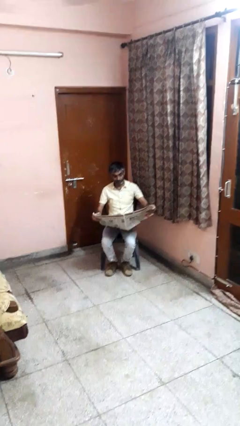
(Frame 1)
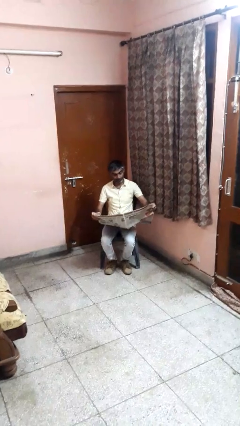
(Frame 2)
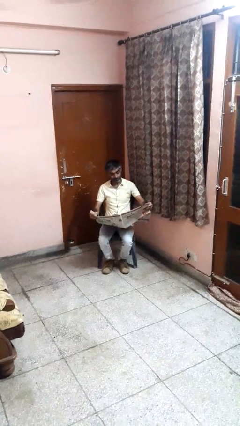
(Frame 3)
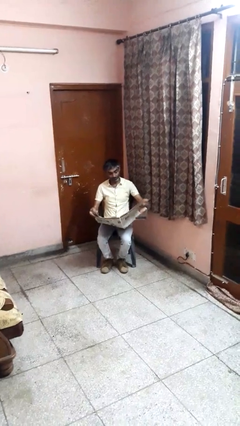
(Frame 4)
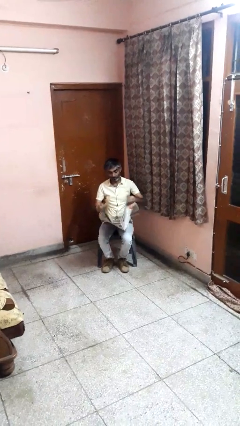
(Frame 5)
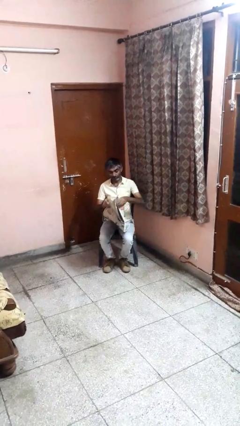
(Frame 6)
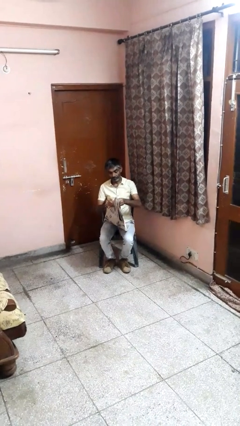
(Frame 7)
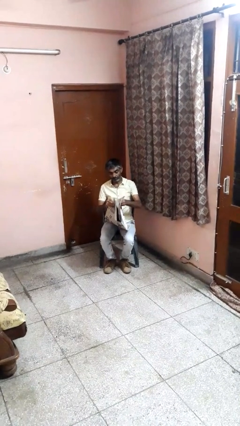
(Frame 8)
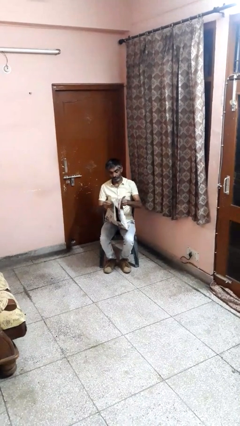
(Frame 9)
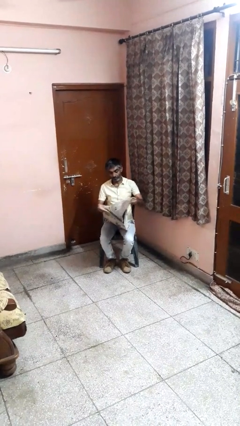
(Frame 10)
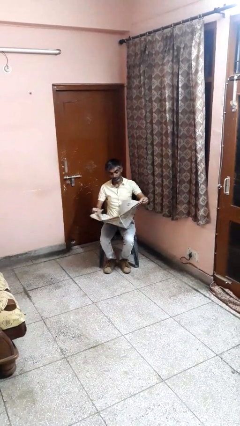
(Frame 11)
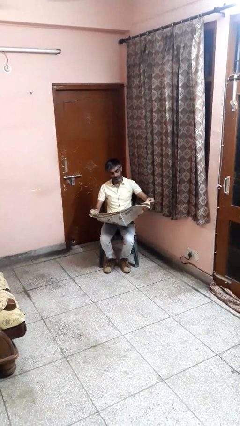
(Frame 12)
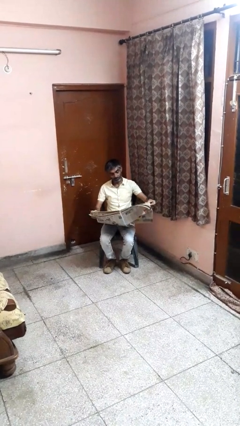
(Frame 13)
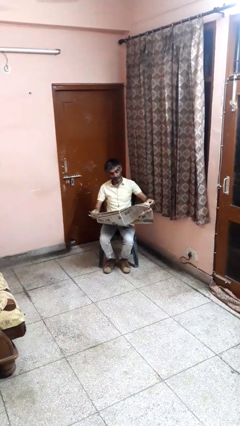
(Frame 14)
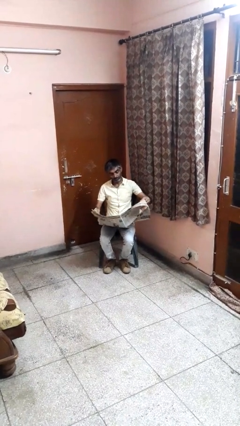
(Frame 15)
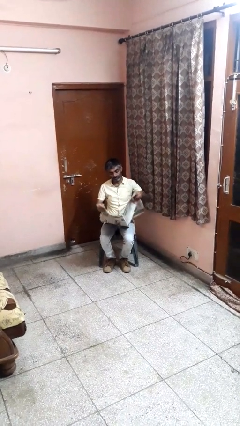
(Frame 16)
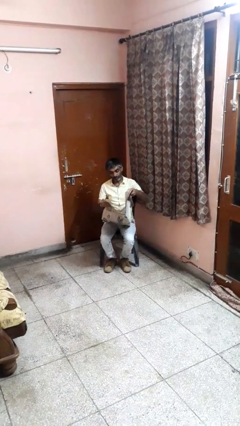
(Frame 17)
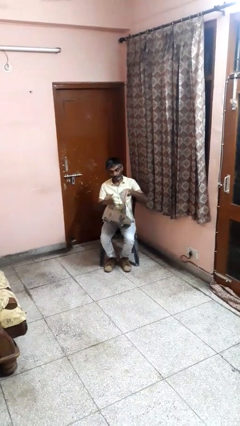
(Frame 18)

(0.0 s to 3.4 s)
person reads newspaper

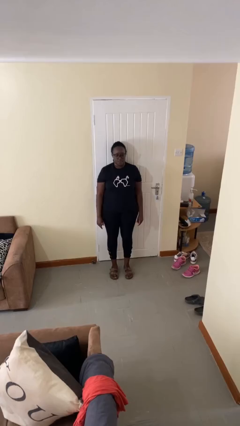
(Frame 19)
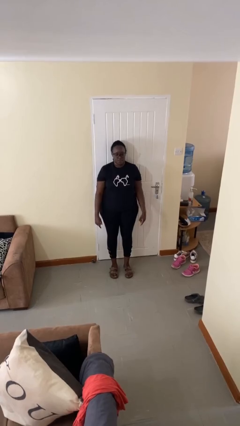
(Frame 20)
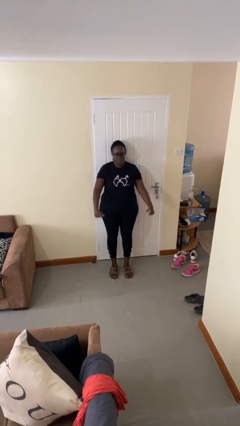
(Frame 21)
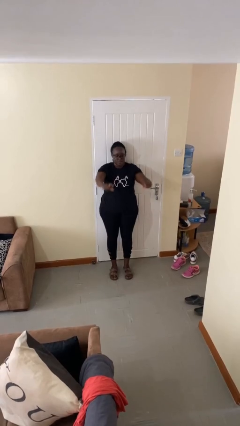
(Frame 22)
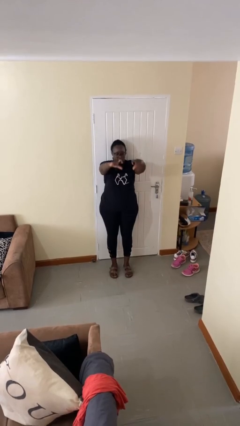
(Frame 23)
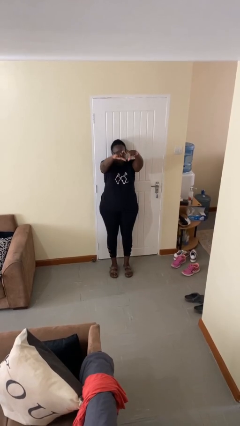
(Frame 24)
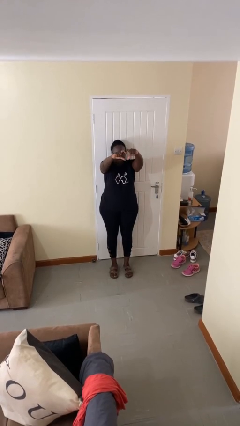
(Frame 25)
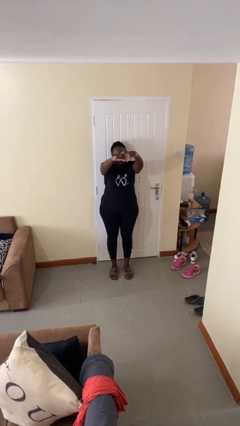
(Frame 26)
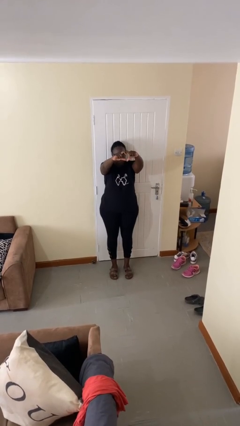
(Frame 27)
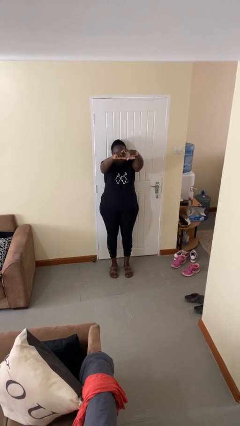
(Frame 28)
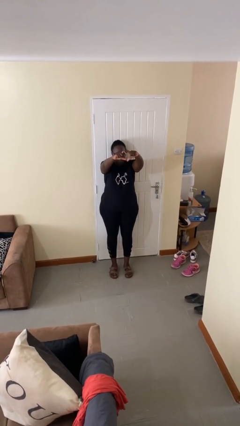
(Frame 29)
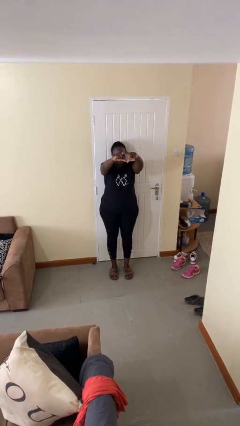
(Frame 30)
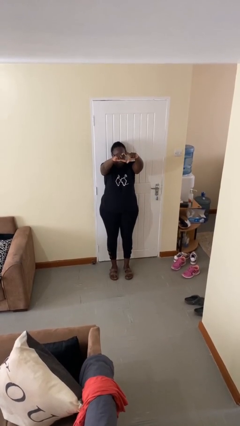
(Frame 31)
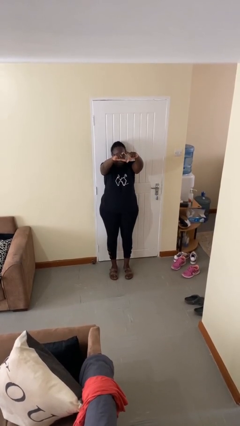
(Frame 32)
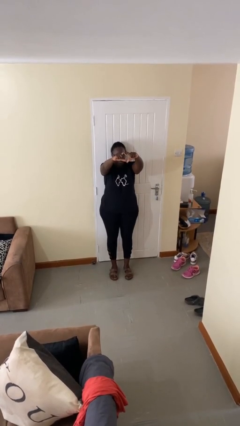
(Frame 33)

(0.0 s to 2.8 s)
person gestures heart

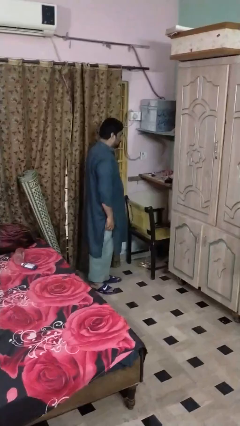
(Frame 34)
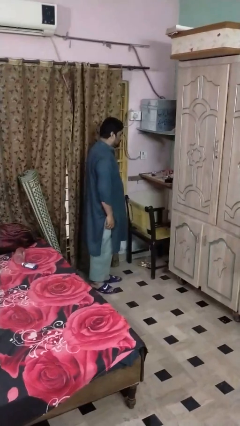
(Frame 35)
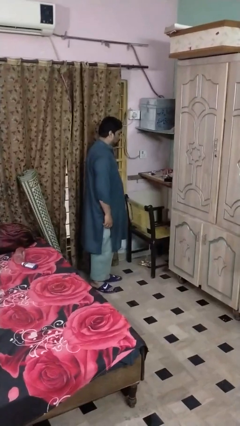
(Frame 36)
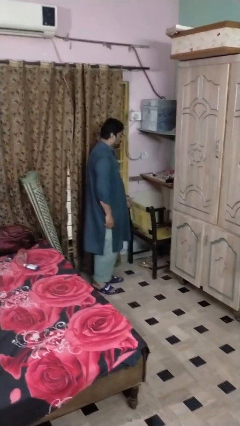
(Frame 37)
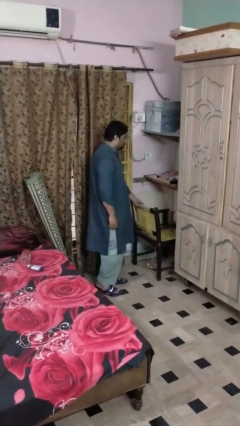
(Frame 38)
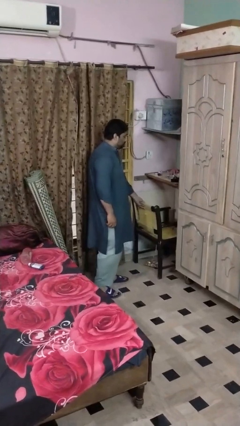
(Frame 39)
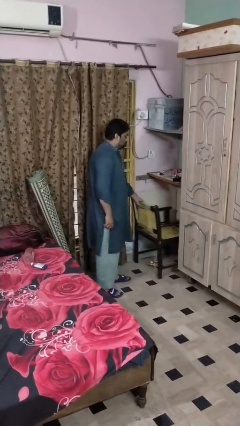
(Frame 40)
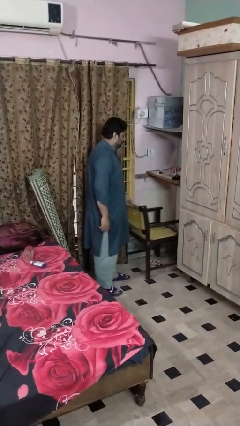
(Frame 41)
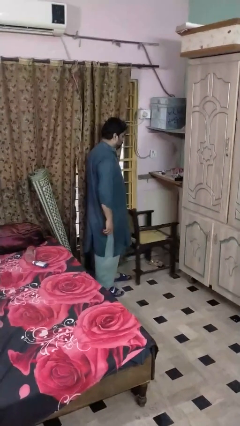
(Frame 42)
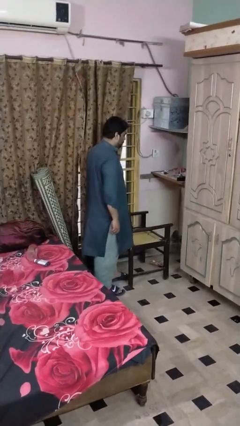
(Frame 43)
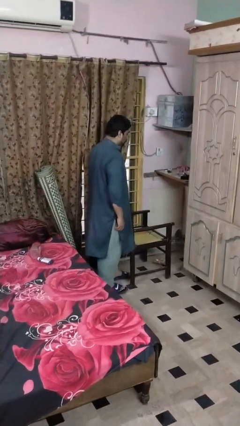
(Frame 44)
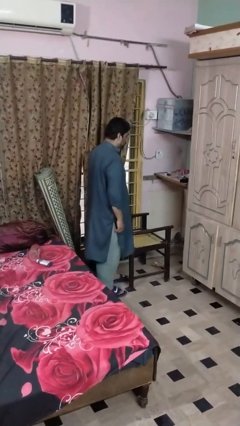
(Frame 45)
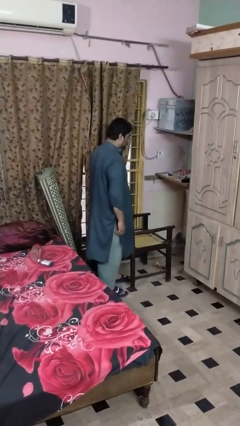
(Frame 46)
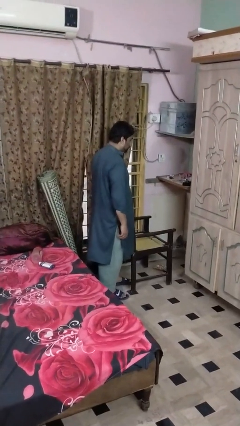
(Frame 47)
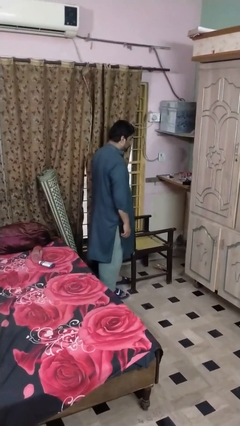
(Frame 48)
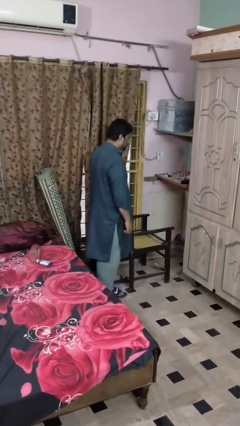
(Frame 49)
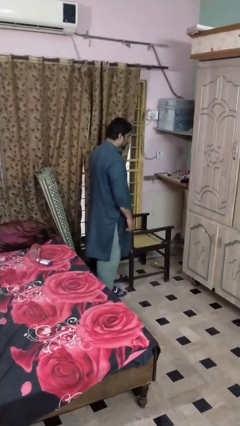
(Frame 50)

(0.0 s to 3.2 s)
person pulls out chair

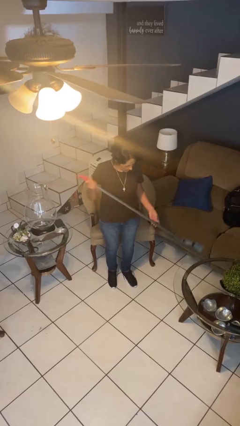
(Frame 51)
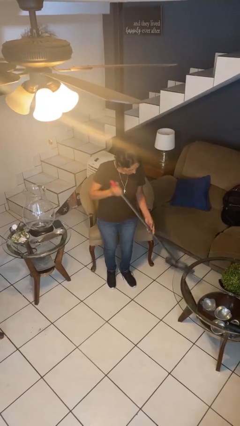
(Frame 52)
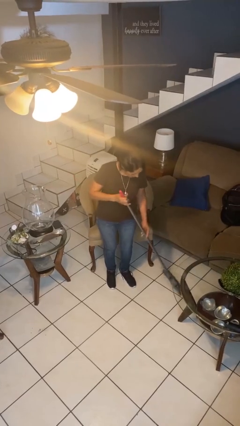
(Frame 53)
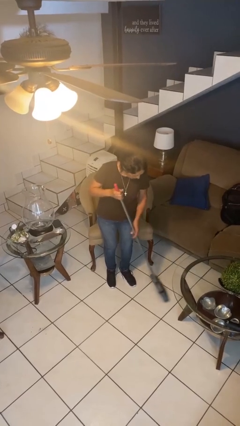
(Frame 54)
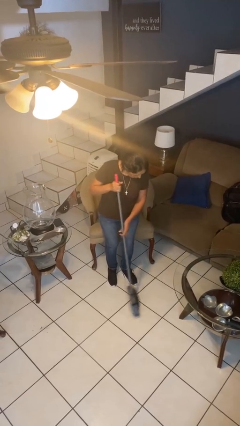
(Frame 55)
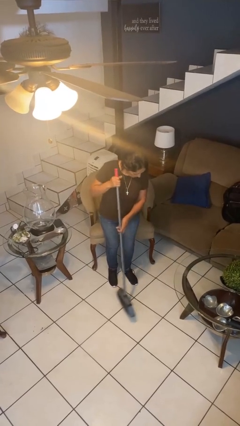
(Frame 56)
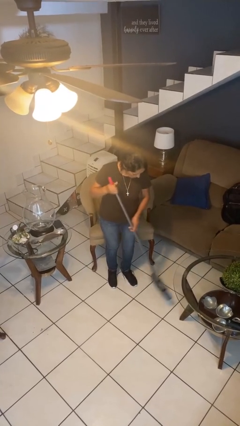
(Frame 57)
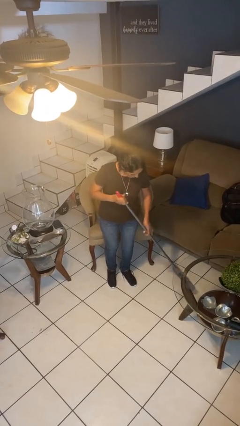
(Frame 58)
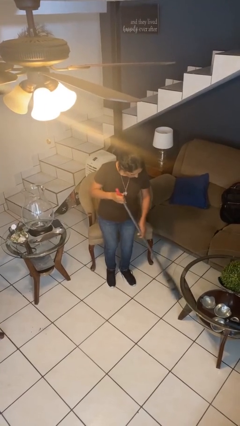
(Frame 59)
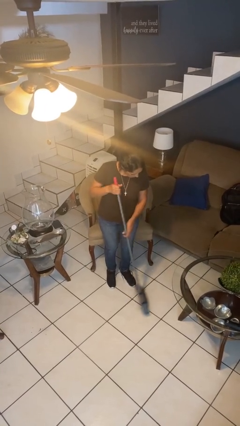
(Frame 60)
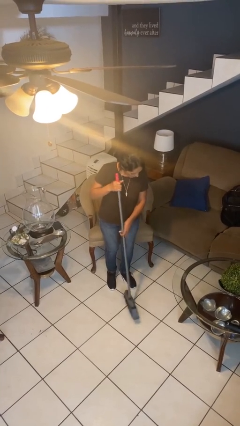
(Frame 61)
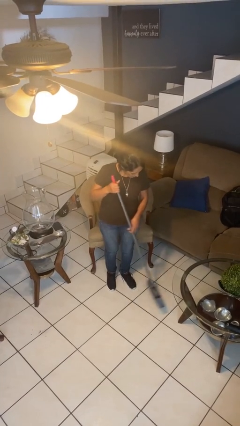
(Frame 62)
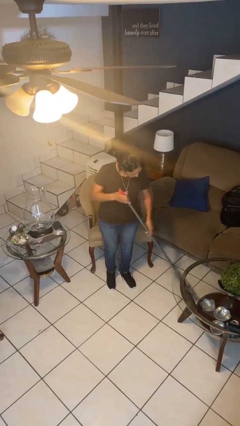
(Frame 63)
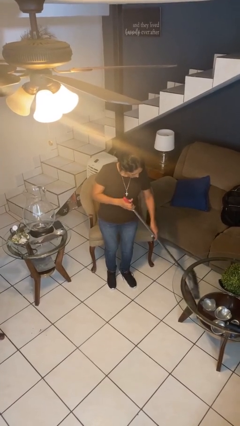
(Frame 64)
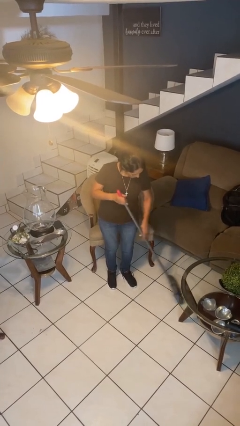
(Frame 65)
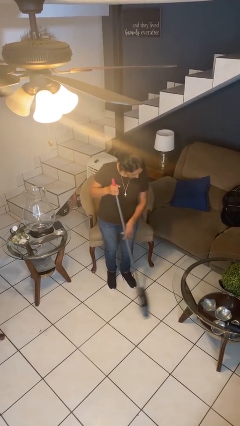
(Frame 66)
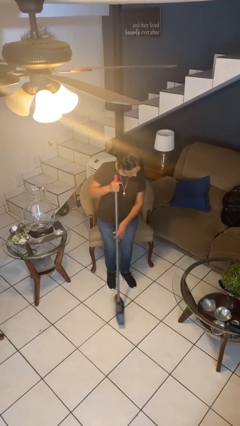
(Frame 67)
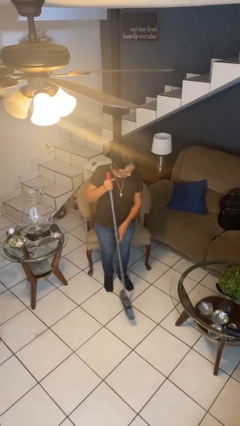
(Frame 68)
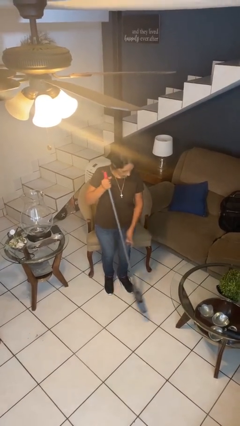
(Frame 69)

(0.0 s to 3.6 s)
person sweeps floor

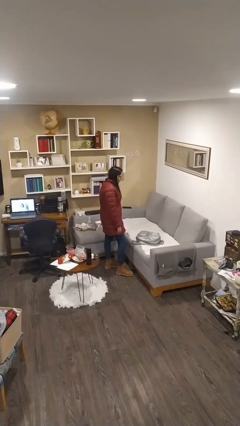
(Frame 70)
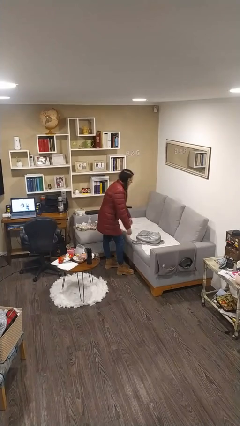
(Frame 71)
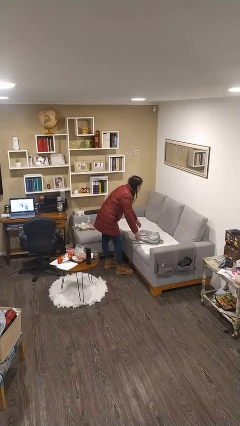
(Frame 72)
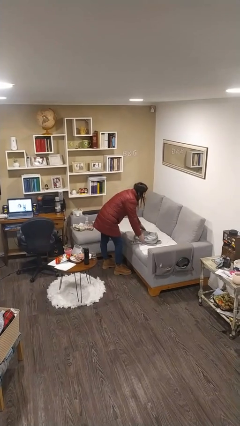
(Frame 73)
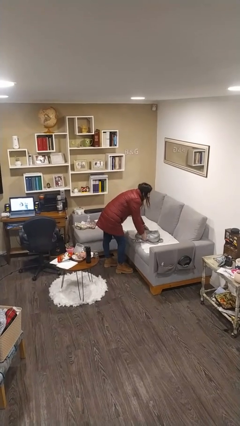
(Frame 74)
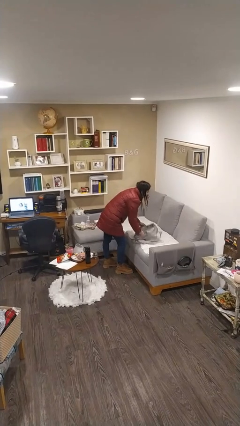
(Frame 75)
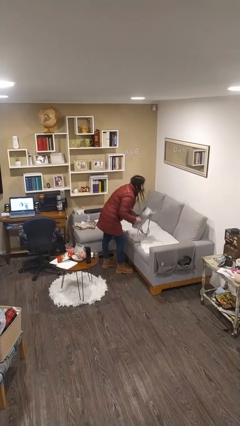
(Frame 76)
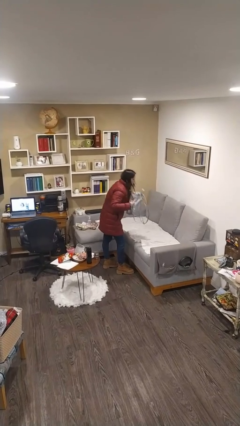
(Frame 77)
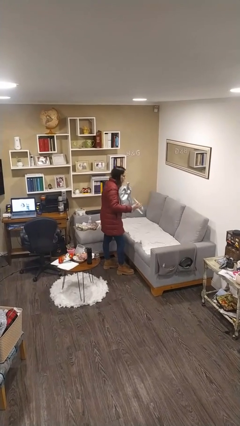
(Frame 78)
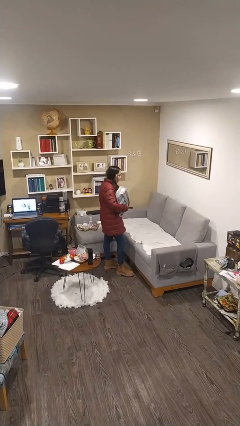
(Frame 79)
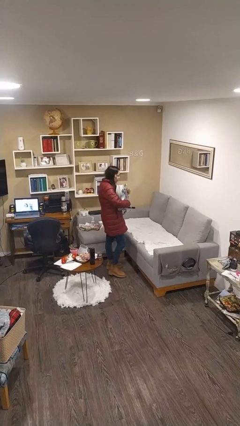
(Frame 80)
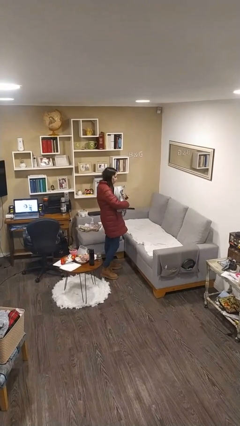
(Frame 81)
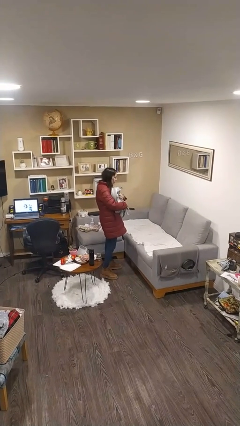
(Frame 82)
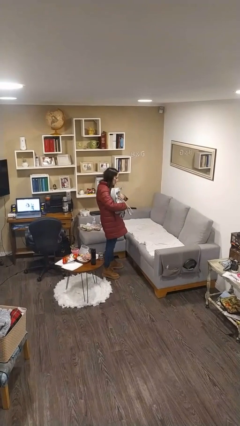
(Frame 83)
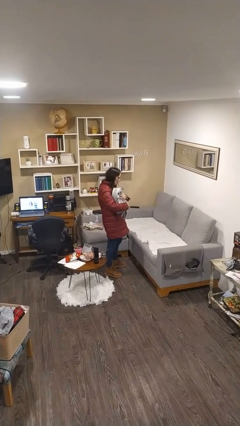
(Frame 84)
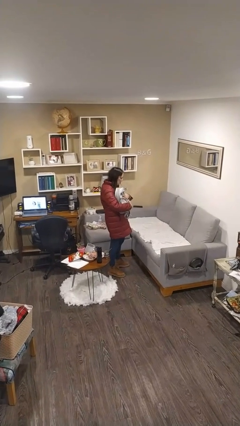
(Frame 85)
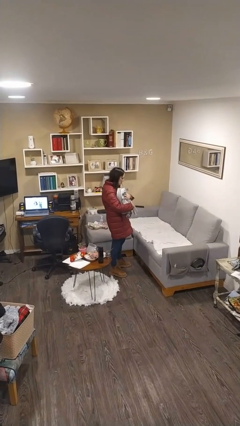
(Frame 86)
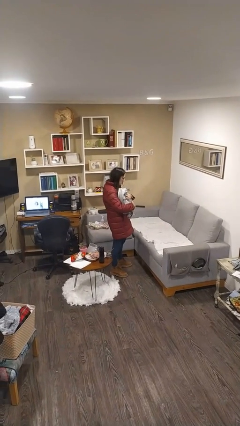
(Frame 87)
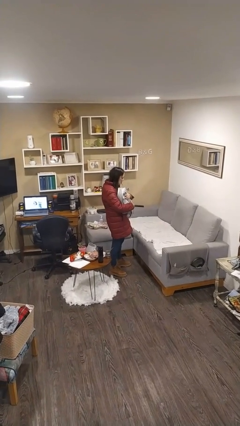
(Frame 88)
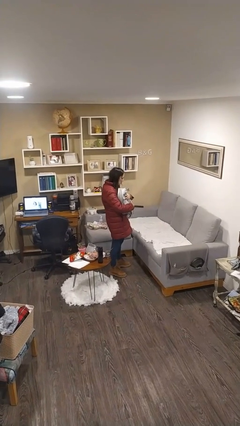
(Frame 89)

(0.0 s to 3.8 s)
person picks up object from couch

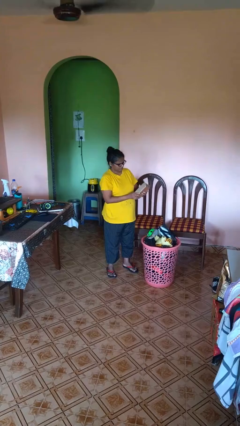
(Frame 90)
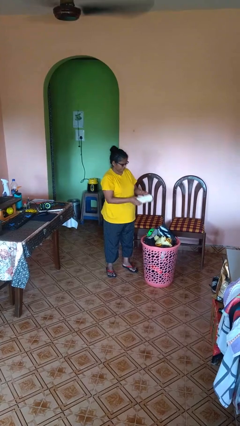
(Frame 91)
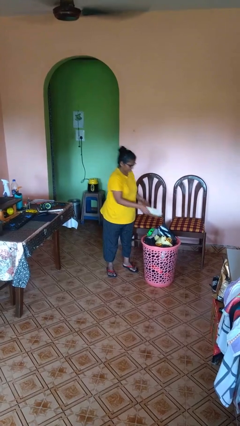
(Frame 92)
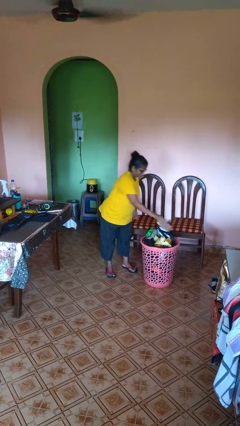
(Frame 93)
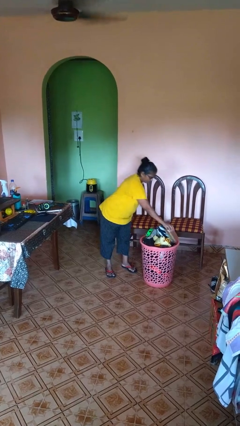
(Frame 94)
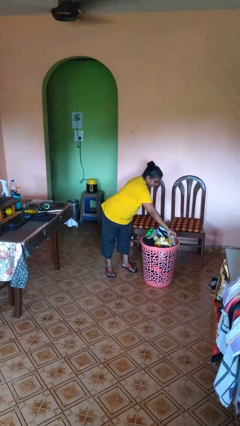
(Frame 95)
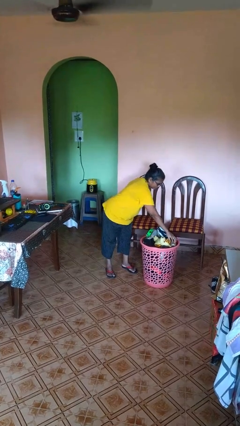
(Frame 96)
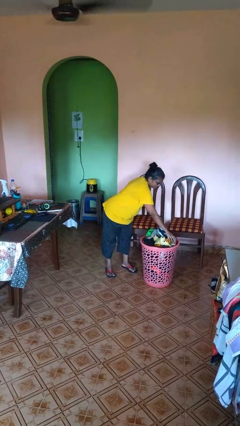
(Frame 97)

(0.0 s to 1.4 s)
person puts object into basket
